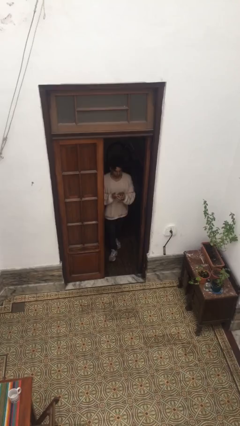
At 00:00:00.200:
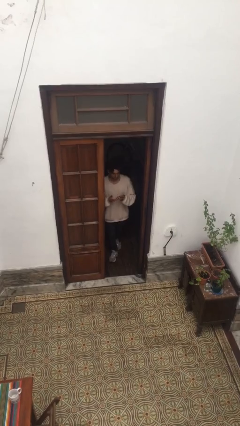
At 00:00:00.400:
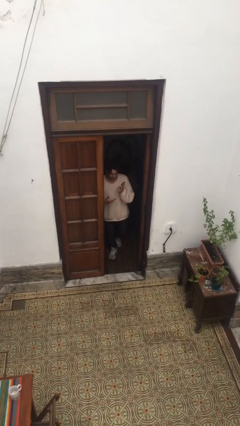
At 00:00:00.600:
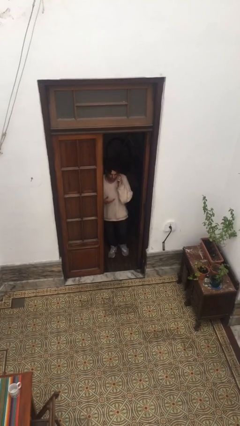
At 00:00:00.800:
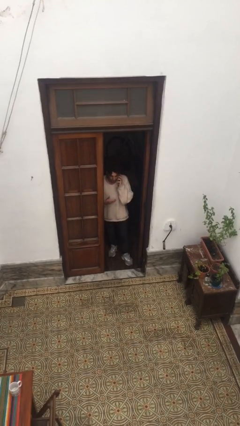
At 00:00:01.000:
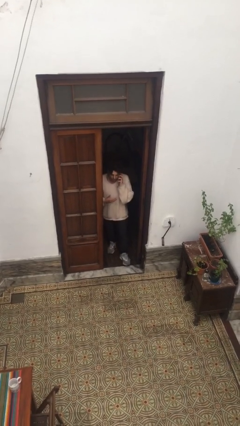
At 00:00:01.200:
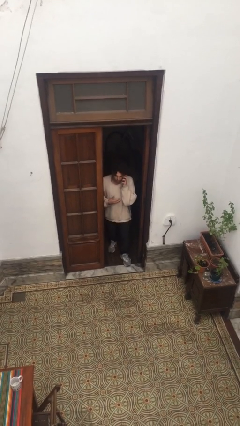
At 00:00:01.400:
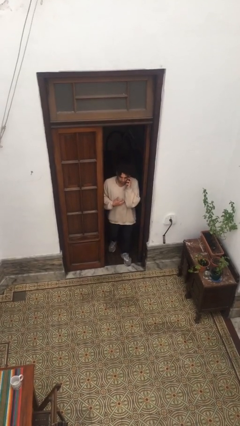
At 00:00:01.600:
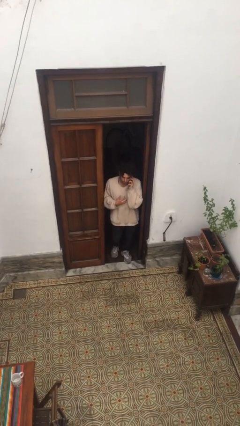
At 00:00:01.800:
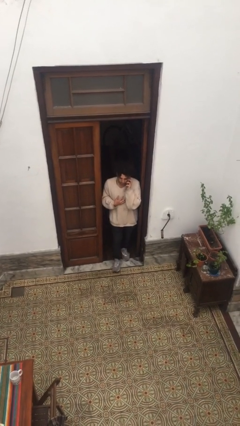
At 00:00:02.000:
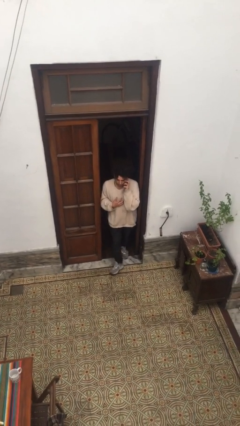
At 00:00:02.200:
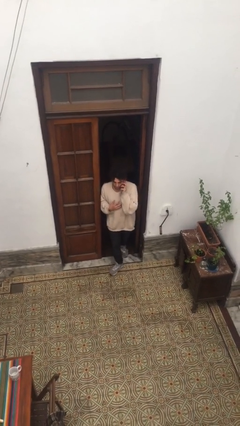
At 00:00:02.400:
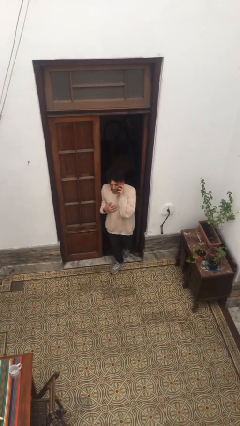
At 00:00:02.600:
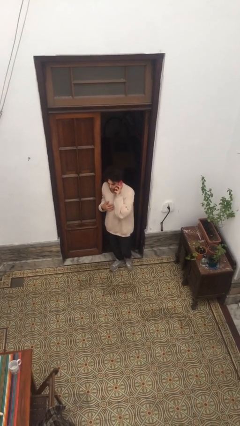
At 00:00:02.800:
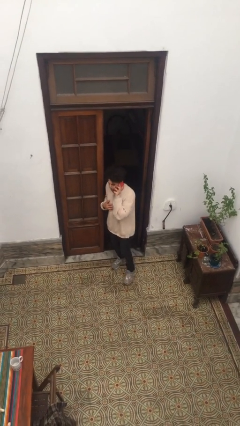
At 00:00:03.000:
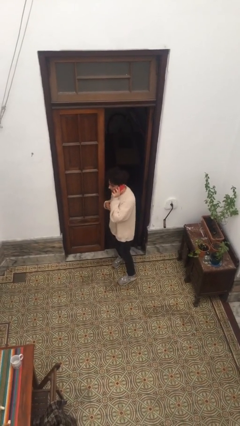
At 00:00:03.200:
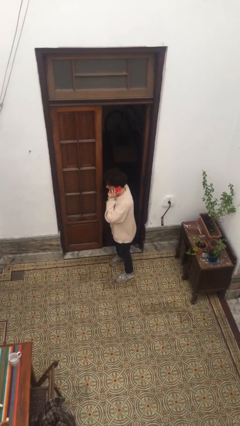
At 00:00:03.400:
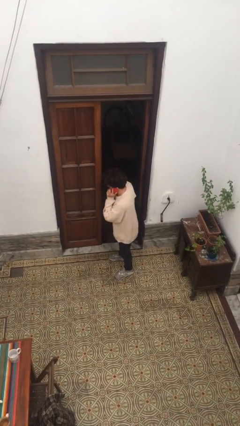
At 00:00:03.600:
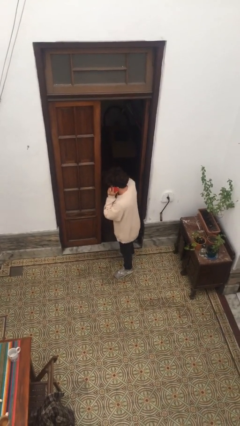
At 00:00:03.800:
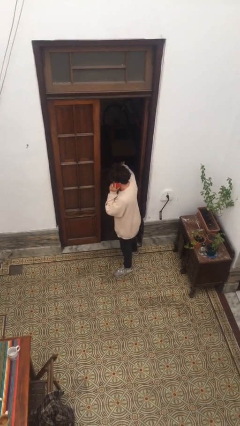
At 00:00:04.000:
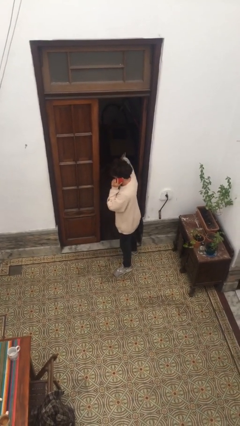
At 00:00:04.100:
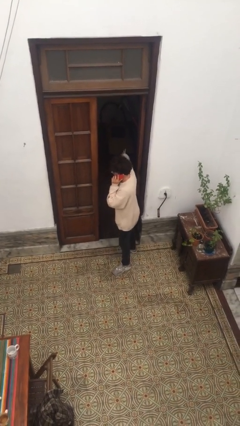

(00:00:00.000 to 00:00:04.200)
person enters scene through structure

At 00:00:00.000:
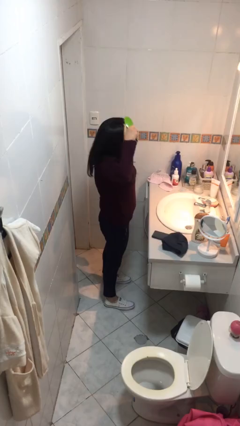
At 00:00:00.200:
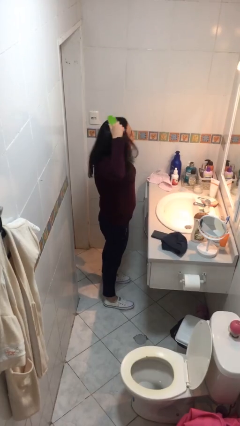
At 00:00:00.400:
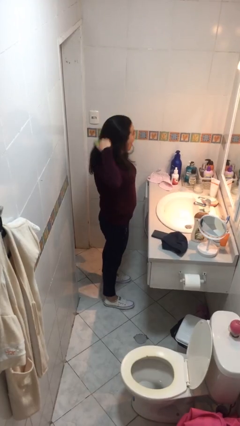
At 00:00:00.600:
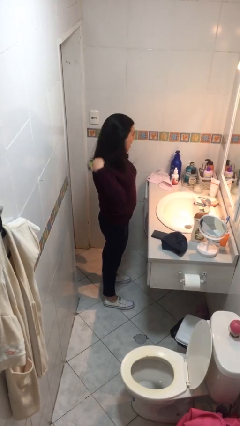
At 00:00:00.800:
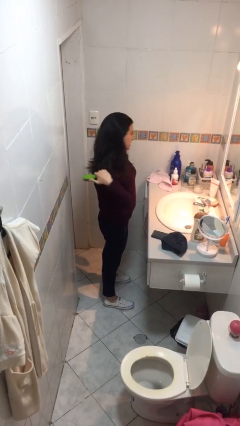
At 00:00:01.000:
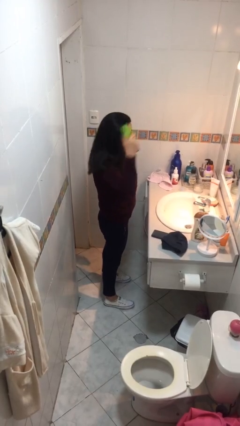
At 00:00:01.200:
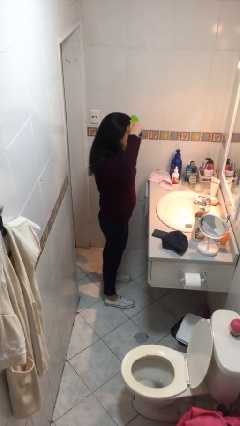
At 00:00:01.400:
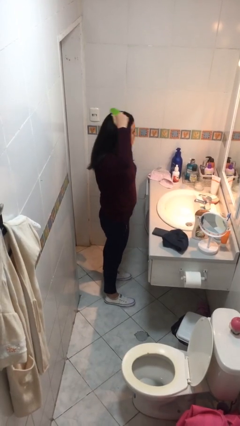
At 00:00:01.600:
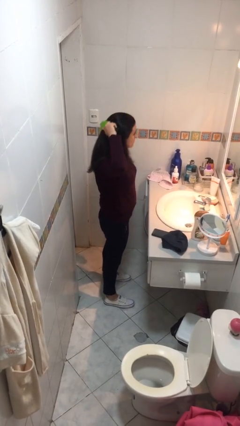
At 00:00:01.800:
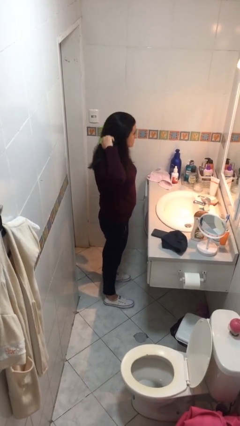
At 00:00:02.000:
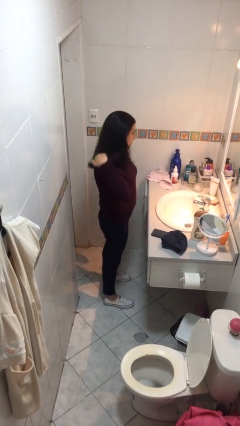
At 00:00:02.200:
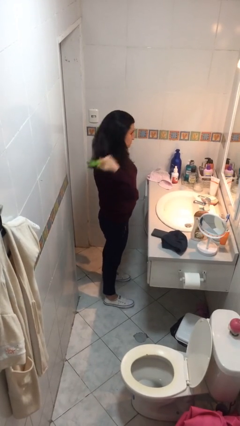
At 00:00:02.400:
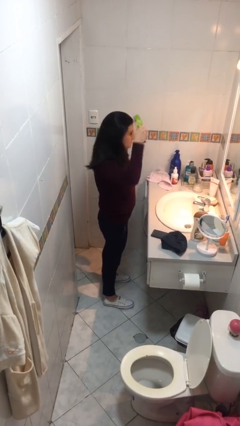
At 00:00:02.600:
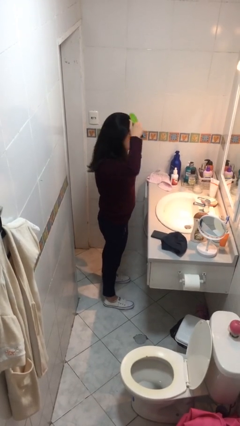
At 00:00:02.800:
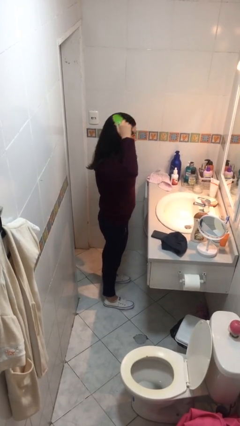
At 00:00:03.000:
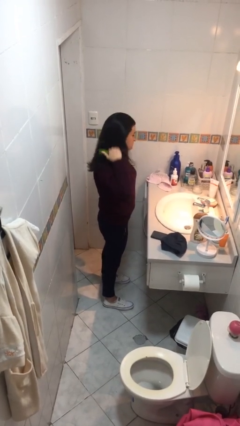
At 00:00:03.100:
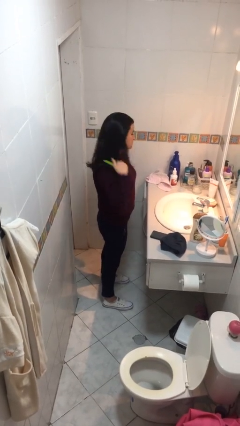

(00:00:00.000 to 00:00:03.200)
person brushes hair

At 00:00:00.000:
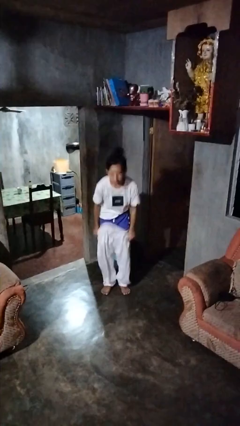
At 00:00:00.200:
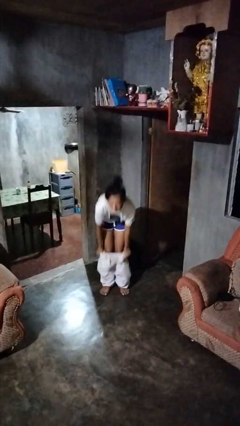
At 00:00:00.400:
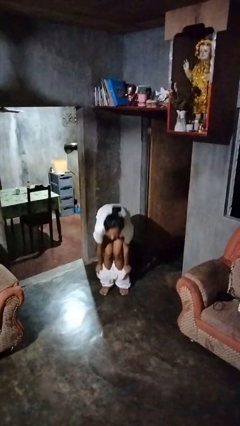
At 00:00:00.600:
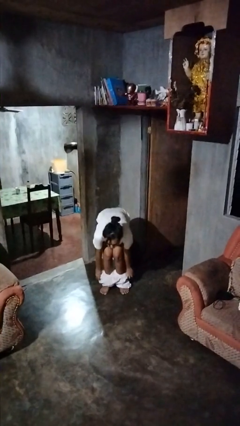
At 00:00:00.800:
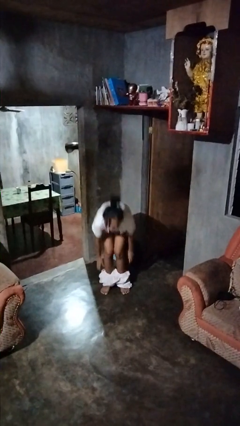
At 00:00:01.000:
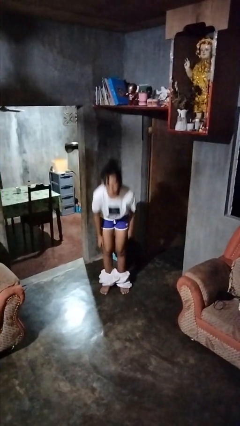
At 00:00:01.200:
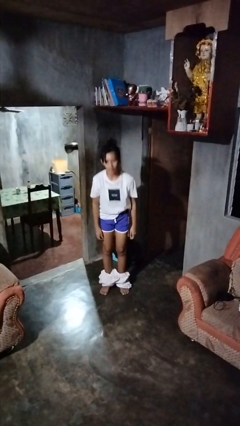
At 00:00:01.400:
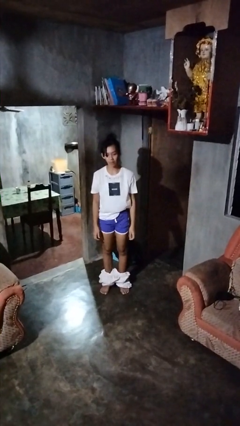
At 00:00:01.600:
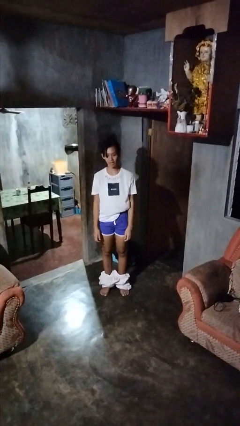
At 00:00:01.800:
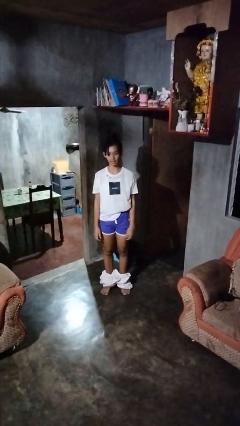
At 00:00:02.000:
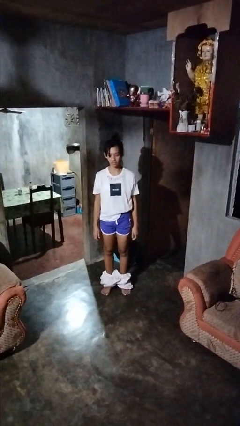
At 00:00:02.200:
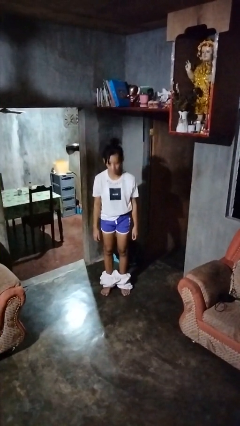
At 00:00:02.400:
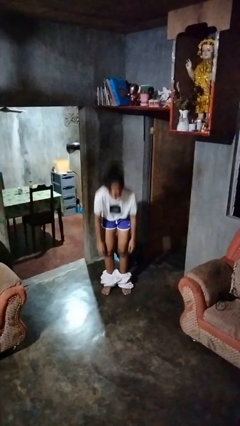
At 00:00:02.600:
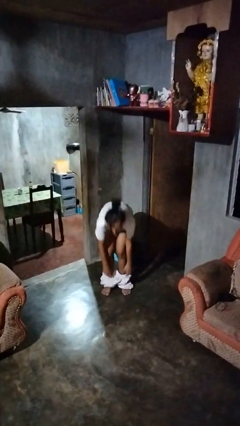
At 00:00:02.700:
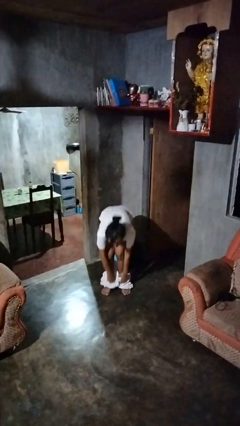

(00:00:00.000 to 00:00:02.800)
person takes off pants

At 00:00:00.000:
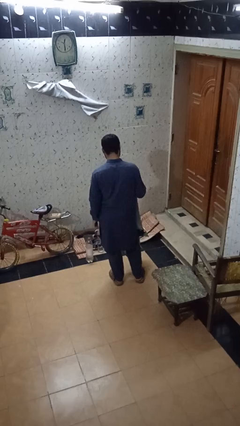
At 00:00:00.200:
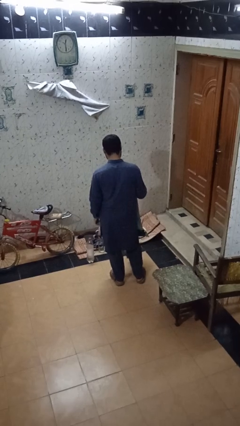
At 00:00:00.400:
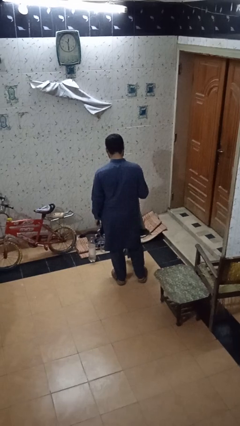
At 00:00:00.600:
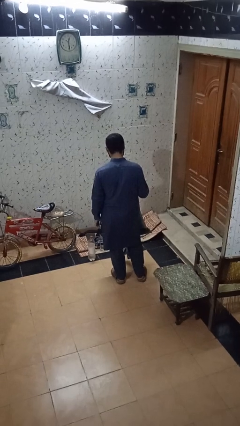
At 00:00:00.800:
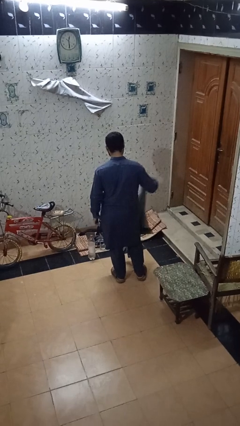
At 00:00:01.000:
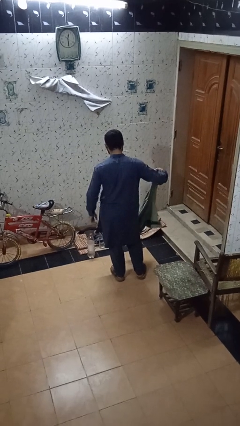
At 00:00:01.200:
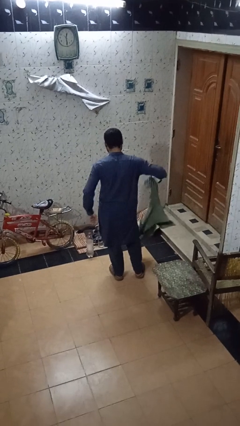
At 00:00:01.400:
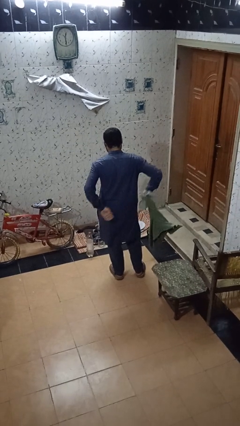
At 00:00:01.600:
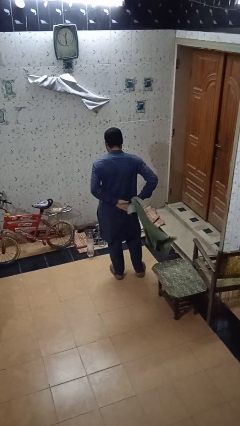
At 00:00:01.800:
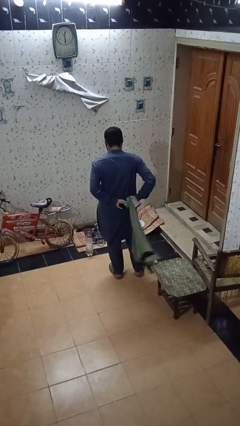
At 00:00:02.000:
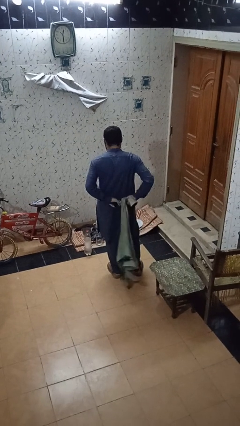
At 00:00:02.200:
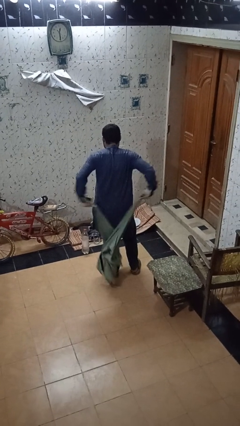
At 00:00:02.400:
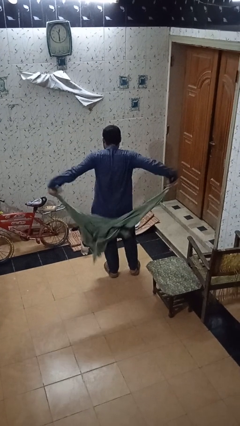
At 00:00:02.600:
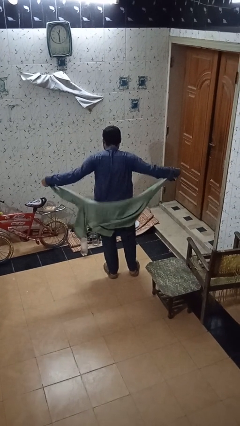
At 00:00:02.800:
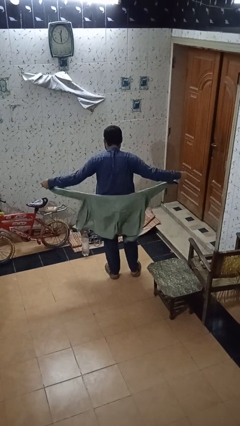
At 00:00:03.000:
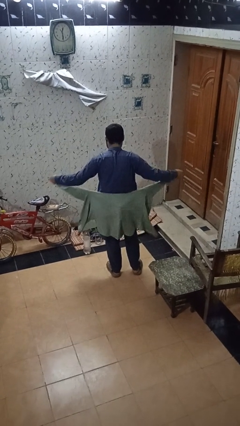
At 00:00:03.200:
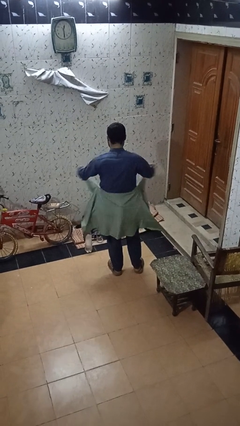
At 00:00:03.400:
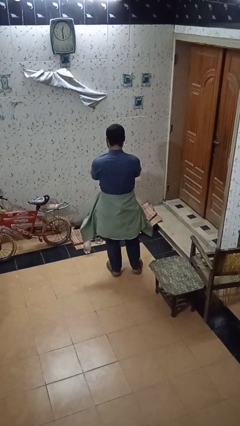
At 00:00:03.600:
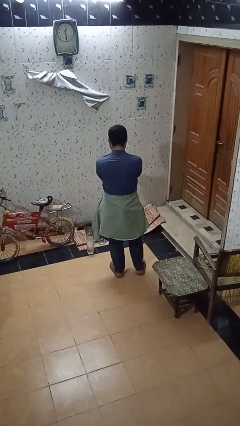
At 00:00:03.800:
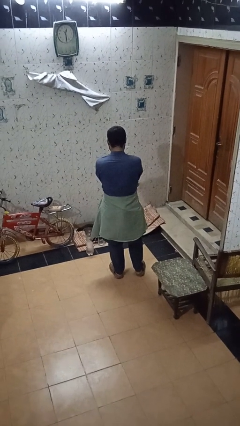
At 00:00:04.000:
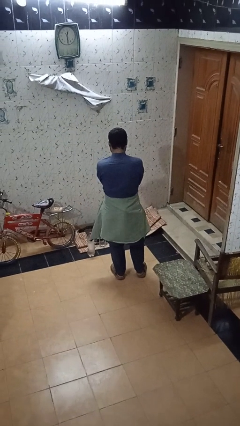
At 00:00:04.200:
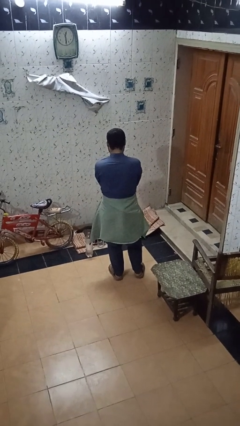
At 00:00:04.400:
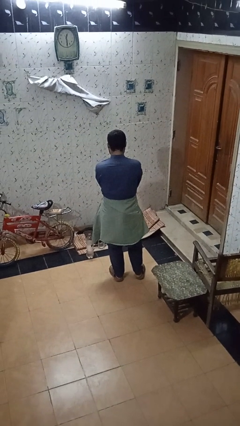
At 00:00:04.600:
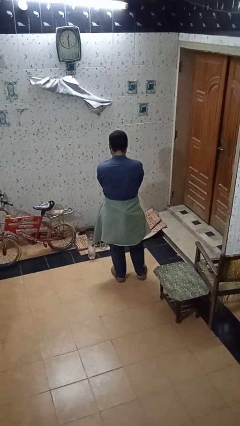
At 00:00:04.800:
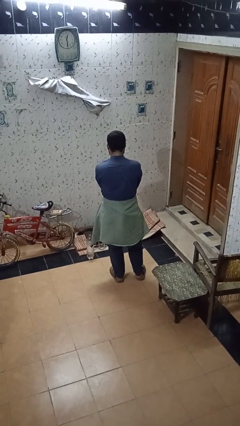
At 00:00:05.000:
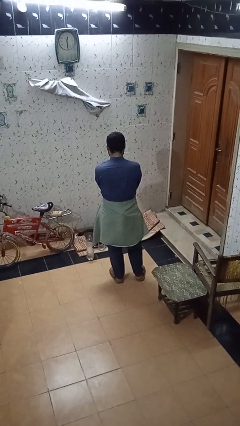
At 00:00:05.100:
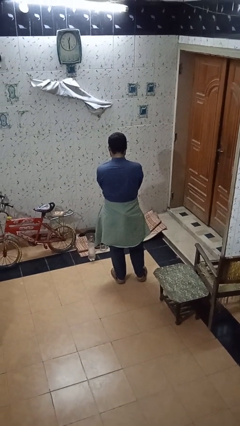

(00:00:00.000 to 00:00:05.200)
person ties jacket around waist

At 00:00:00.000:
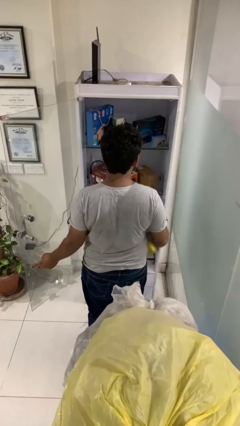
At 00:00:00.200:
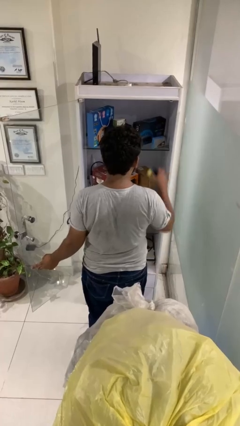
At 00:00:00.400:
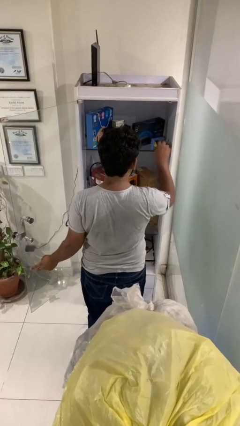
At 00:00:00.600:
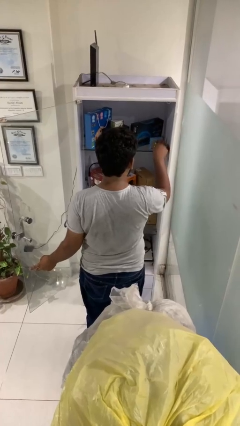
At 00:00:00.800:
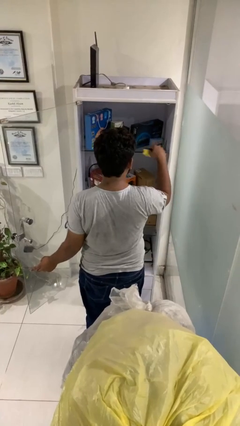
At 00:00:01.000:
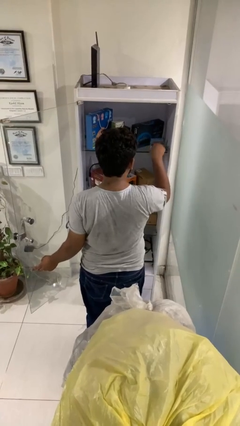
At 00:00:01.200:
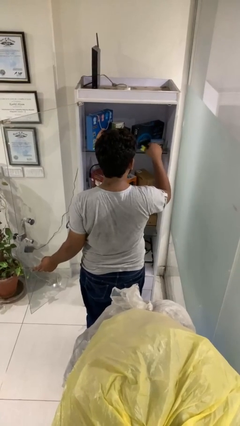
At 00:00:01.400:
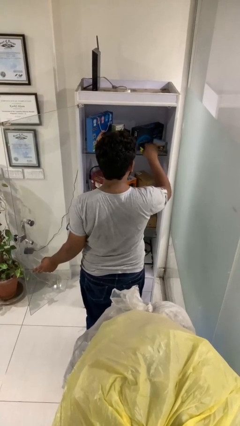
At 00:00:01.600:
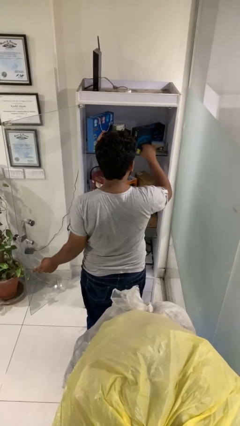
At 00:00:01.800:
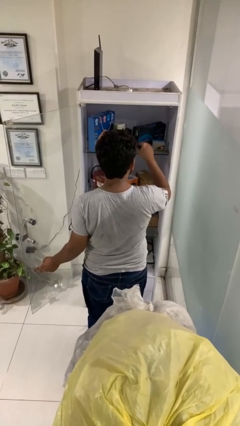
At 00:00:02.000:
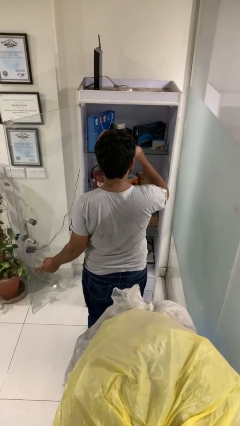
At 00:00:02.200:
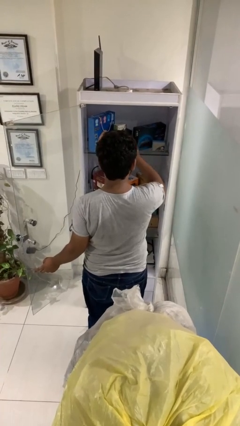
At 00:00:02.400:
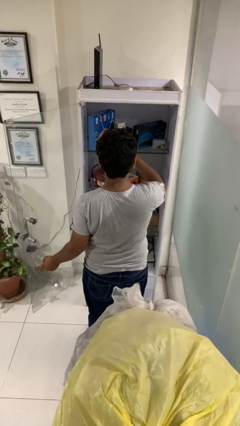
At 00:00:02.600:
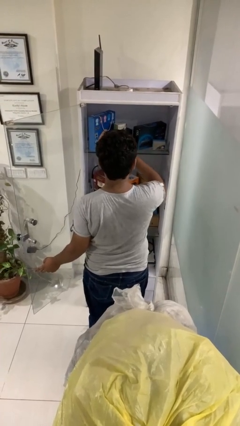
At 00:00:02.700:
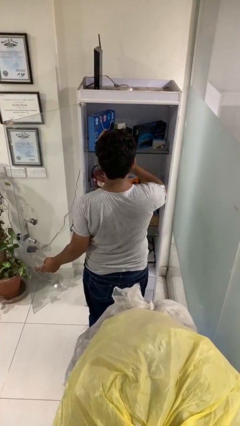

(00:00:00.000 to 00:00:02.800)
person dusts furniture
